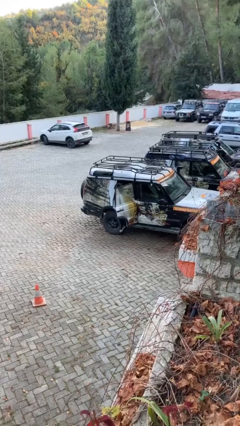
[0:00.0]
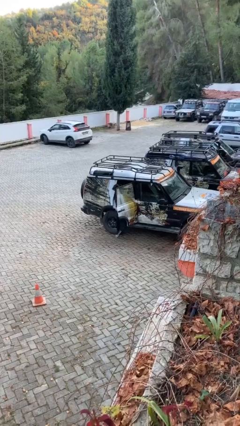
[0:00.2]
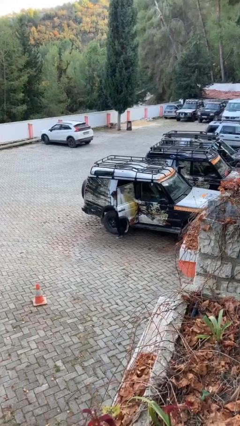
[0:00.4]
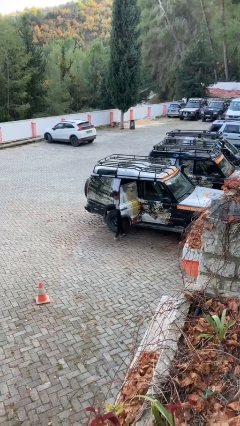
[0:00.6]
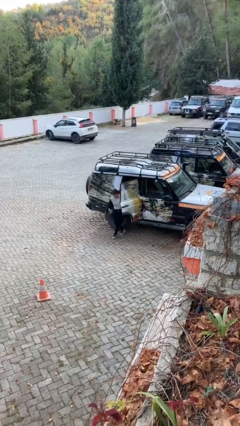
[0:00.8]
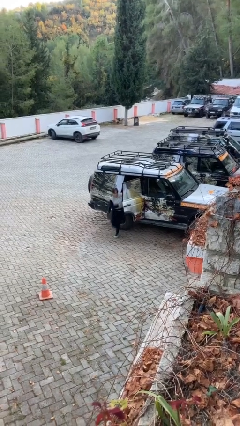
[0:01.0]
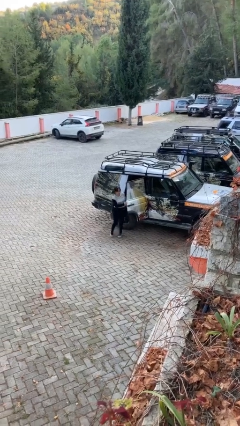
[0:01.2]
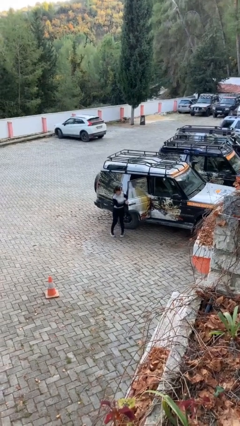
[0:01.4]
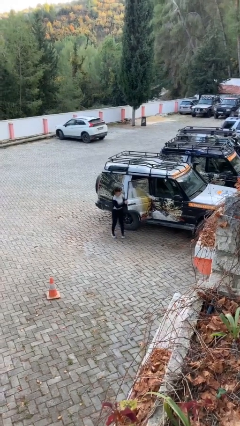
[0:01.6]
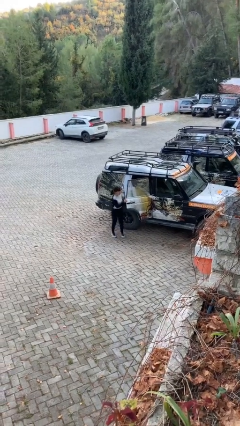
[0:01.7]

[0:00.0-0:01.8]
person exits car

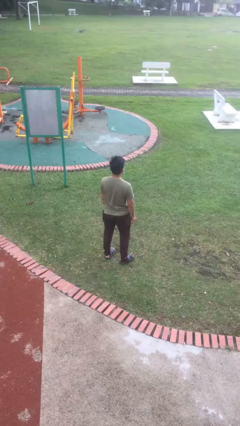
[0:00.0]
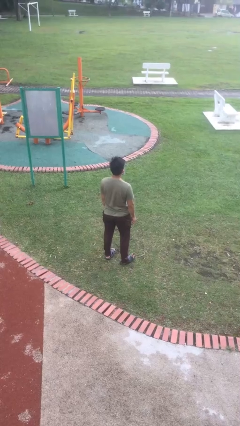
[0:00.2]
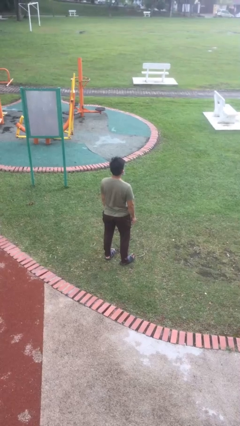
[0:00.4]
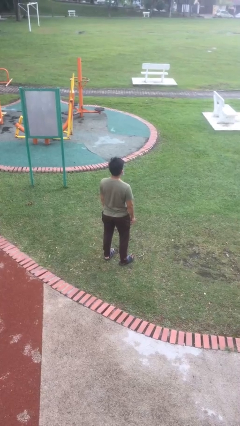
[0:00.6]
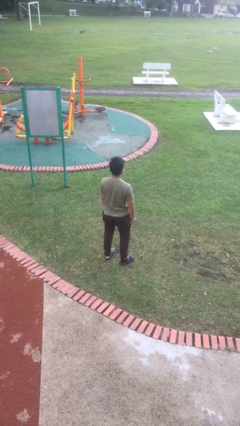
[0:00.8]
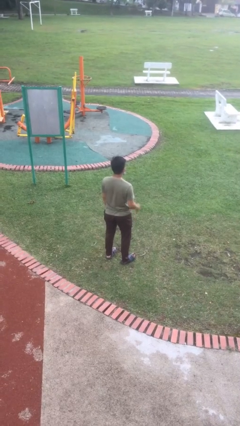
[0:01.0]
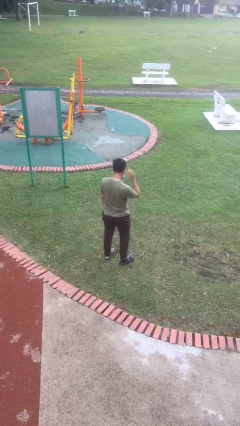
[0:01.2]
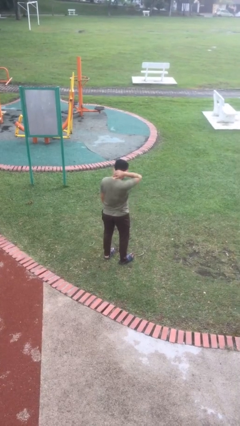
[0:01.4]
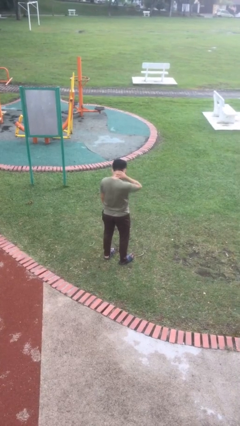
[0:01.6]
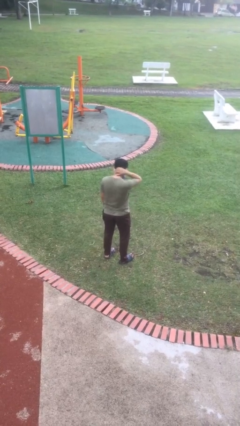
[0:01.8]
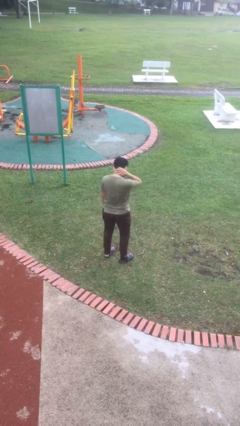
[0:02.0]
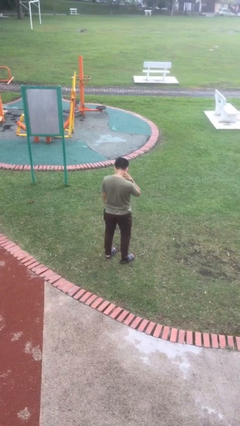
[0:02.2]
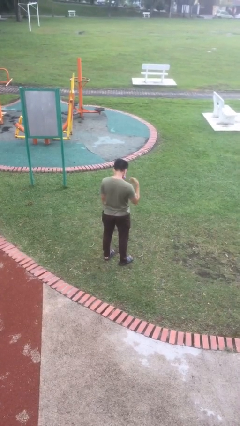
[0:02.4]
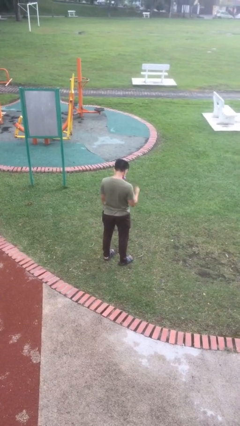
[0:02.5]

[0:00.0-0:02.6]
person rubs neck

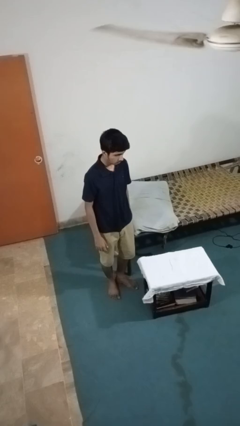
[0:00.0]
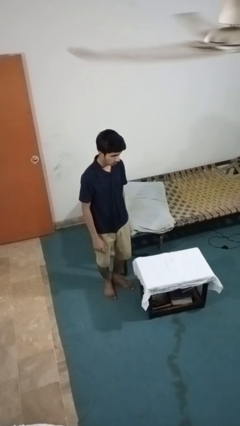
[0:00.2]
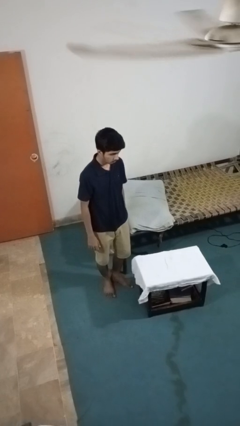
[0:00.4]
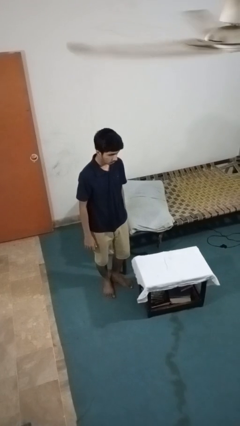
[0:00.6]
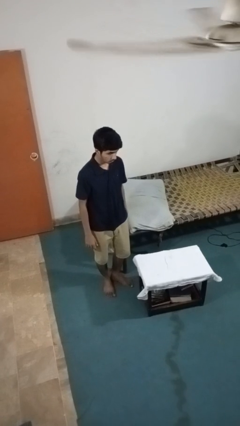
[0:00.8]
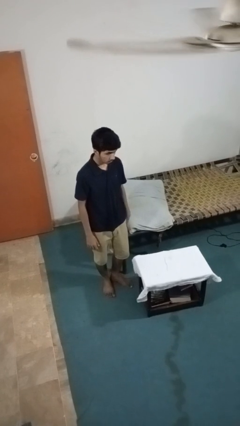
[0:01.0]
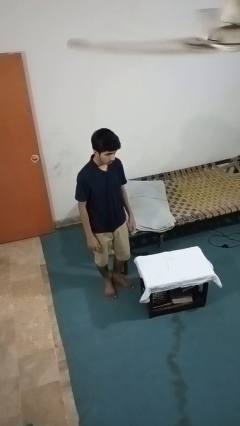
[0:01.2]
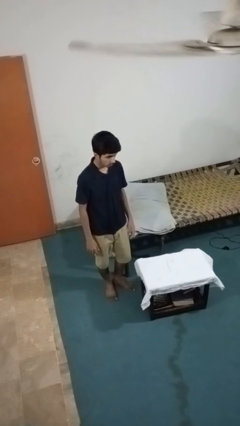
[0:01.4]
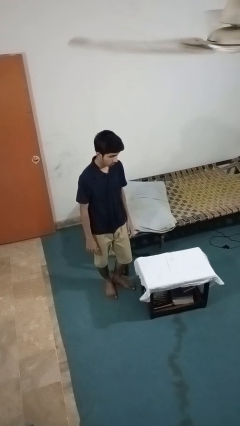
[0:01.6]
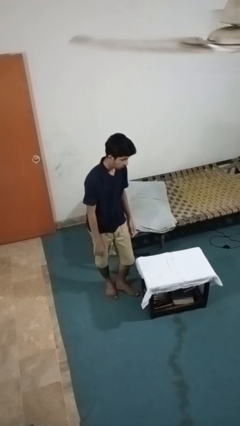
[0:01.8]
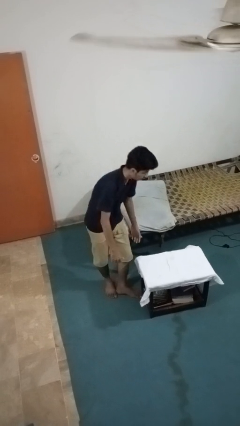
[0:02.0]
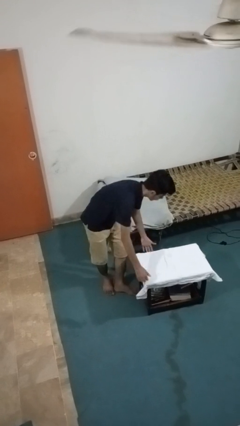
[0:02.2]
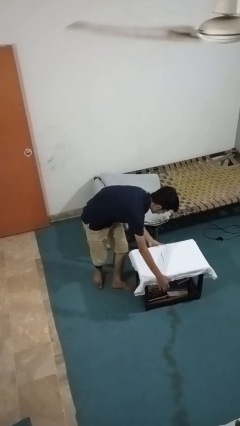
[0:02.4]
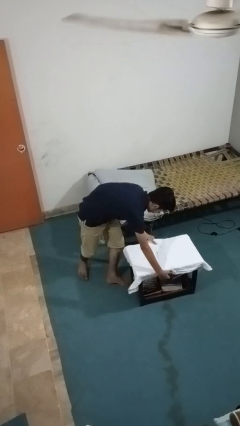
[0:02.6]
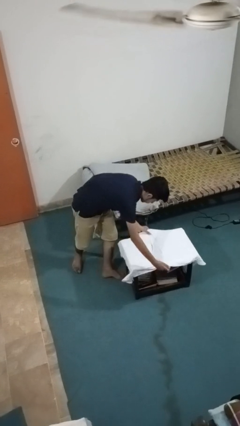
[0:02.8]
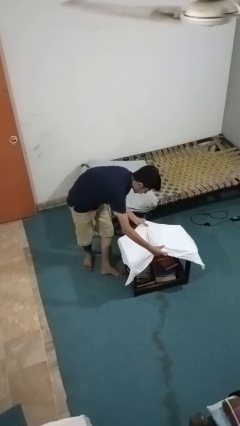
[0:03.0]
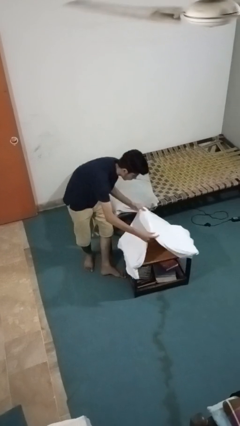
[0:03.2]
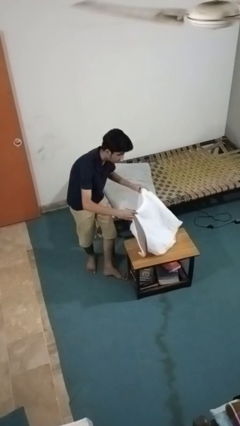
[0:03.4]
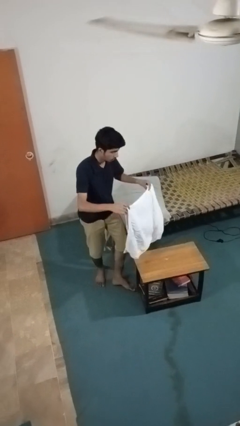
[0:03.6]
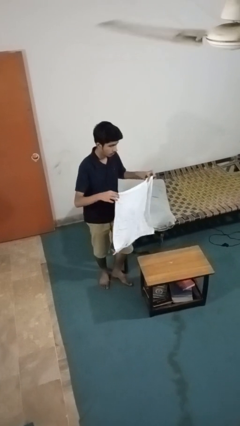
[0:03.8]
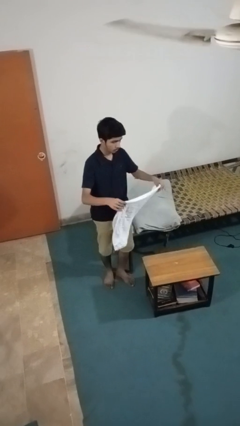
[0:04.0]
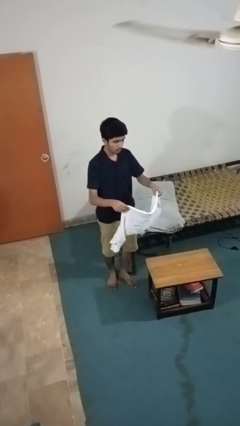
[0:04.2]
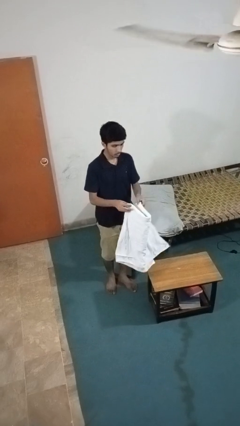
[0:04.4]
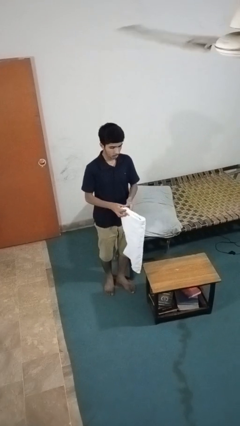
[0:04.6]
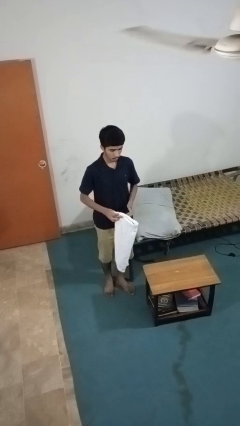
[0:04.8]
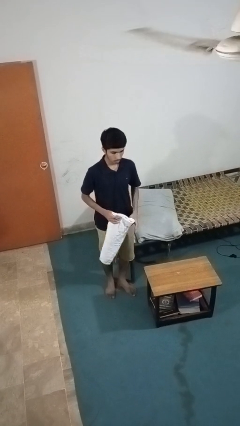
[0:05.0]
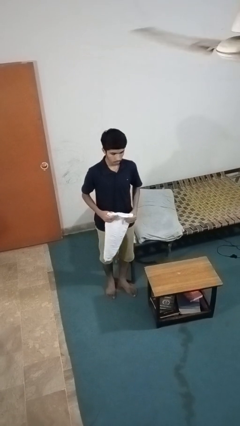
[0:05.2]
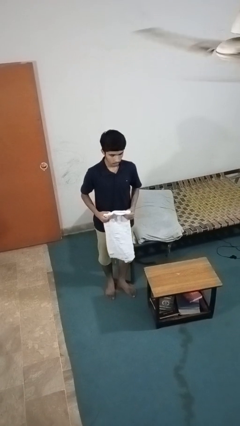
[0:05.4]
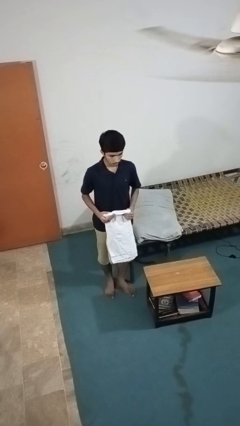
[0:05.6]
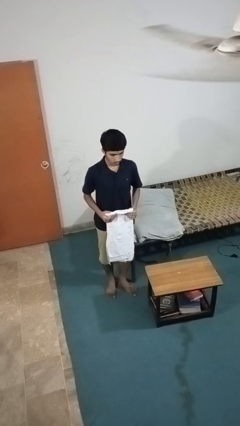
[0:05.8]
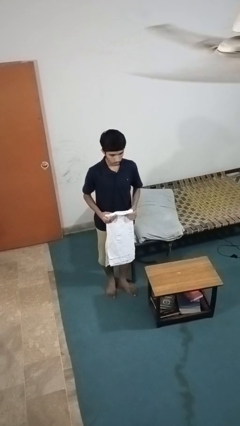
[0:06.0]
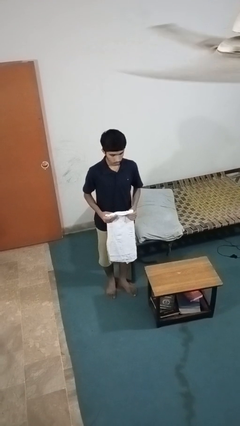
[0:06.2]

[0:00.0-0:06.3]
person folds tablecloth

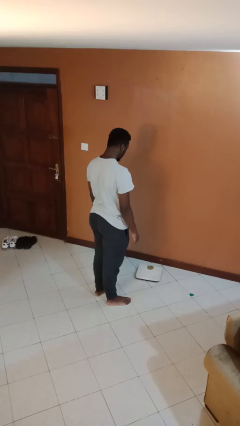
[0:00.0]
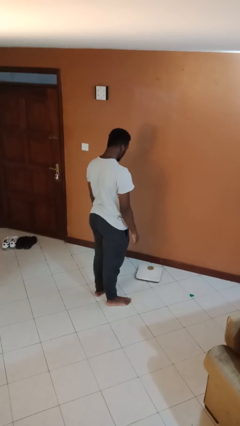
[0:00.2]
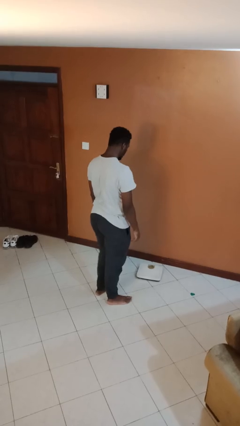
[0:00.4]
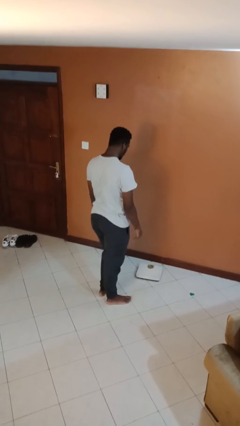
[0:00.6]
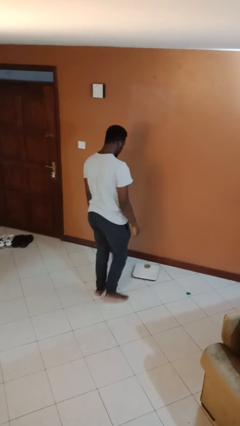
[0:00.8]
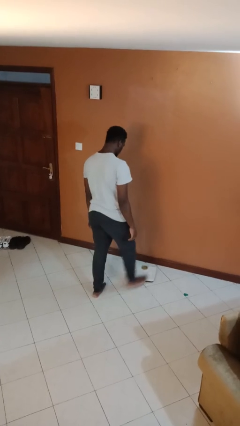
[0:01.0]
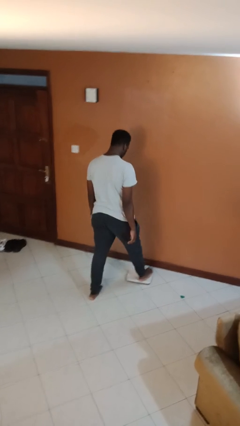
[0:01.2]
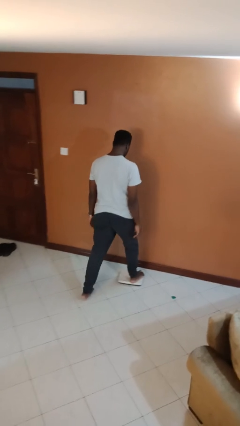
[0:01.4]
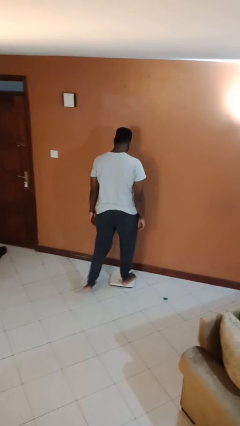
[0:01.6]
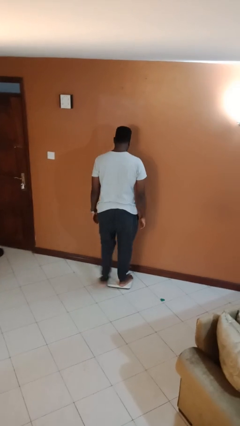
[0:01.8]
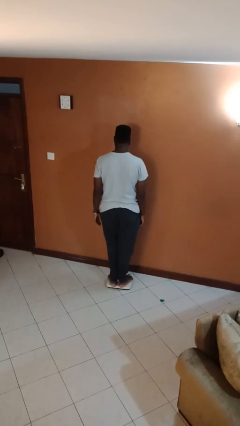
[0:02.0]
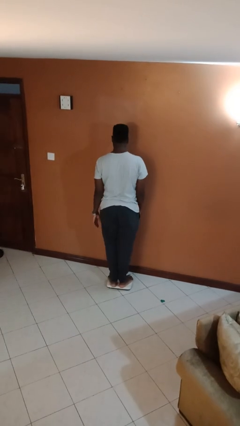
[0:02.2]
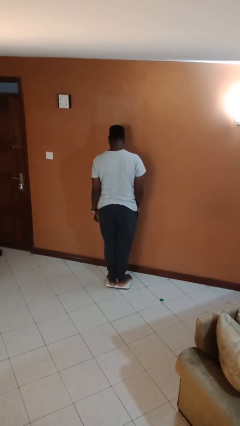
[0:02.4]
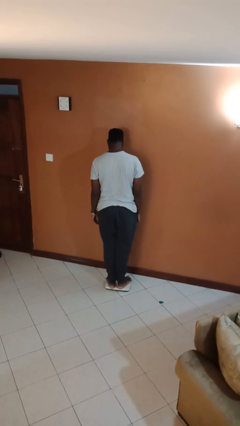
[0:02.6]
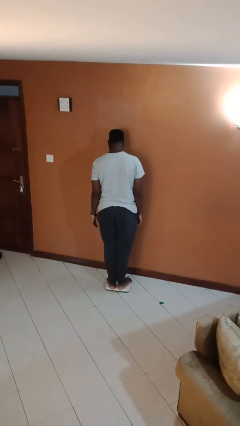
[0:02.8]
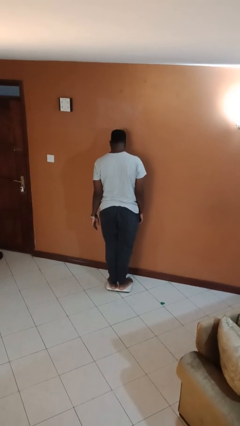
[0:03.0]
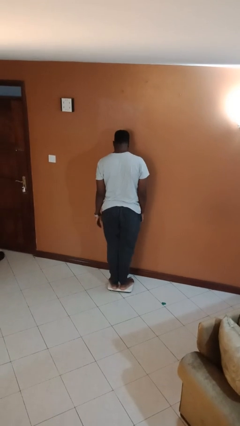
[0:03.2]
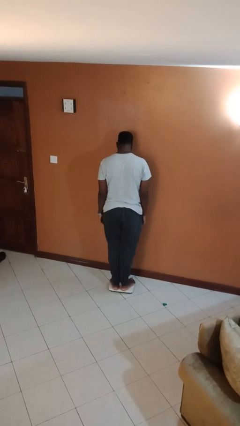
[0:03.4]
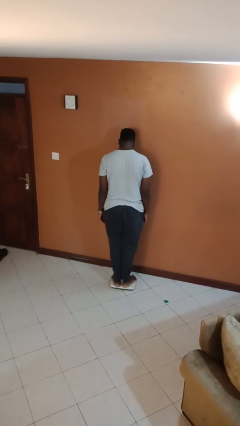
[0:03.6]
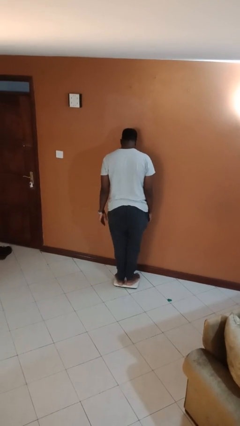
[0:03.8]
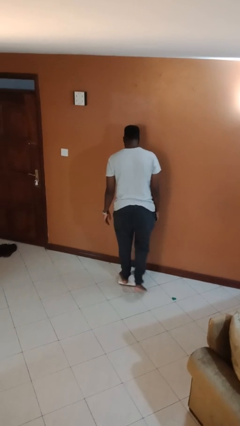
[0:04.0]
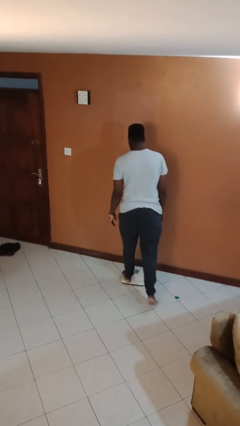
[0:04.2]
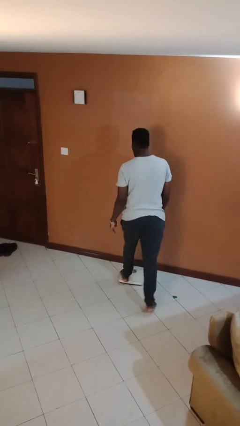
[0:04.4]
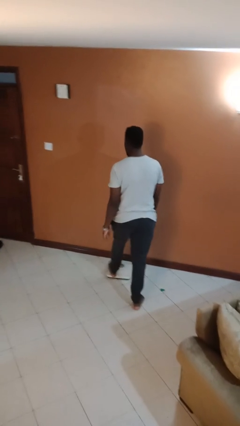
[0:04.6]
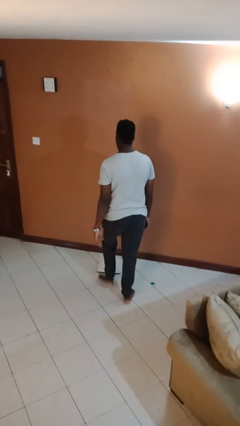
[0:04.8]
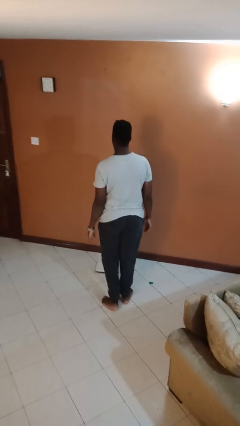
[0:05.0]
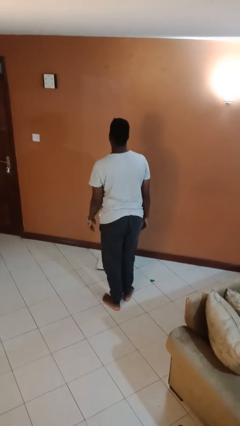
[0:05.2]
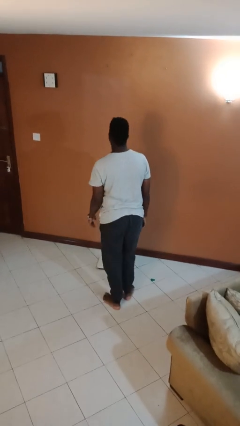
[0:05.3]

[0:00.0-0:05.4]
person uses bodyweight scale

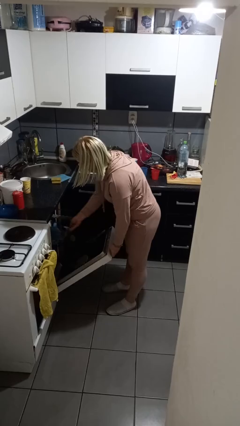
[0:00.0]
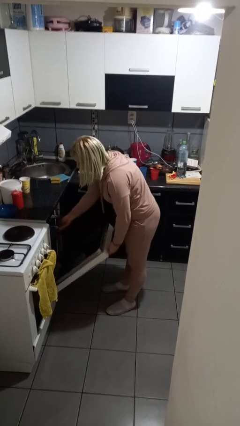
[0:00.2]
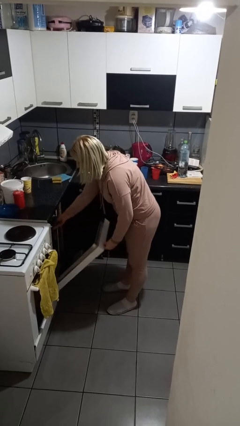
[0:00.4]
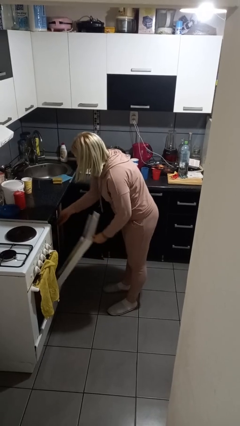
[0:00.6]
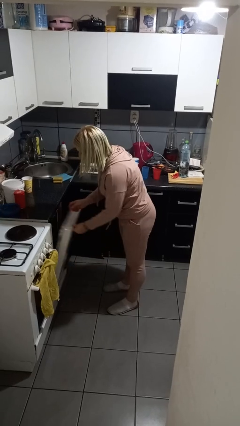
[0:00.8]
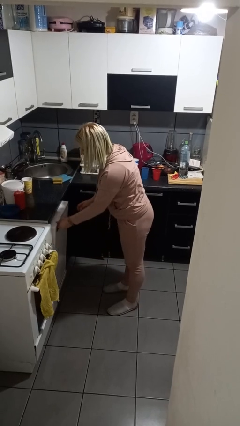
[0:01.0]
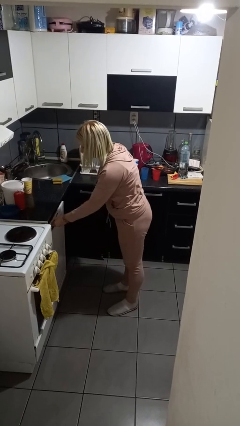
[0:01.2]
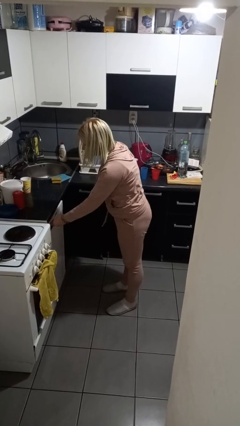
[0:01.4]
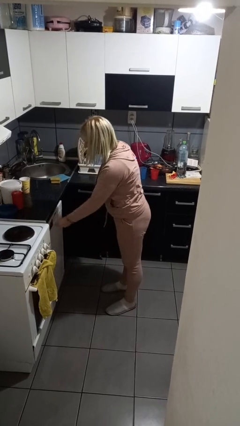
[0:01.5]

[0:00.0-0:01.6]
person closes dishwasher

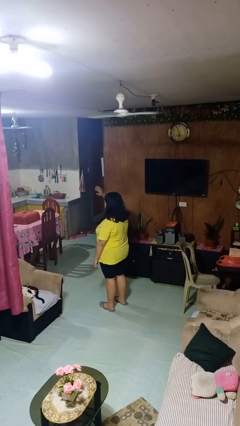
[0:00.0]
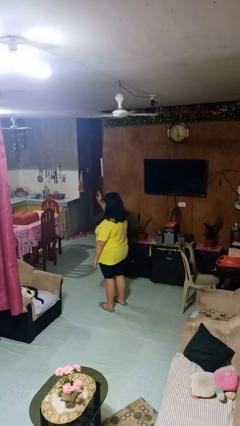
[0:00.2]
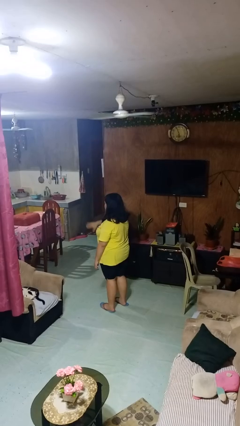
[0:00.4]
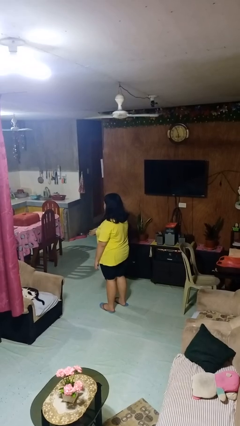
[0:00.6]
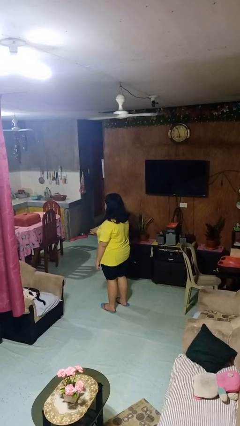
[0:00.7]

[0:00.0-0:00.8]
person gestures swipe down
